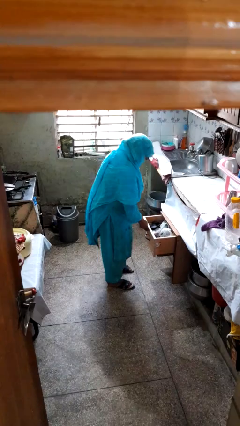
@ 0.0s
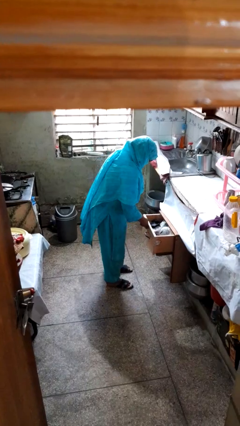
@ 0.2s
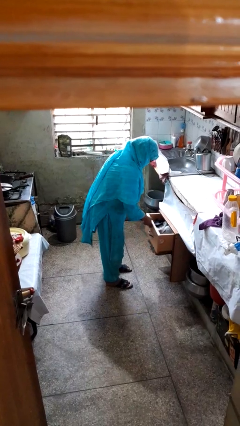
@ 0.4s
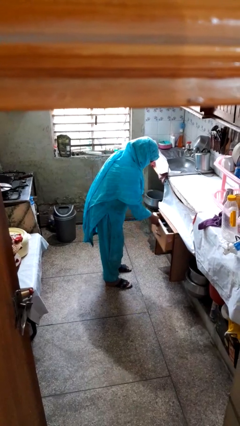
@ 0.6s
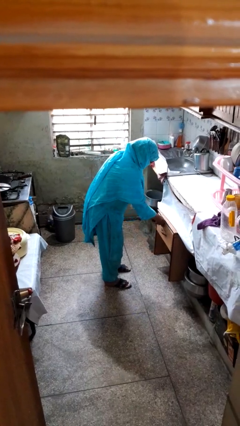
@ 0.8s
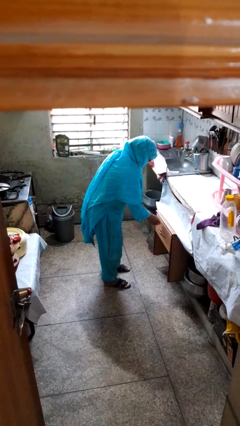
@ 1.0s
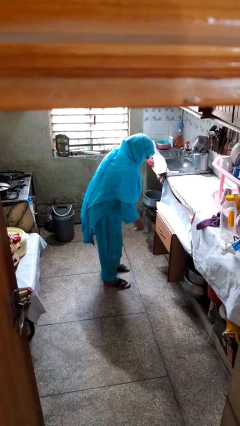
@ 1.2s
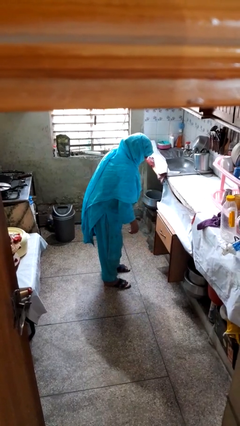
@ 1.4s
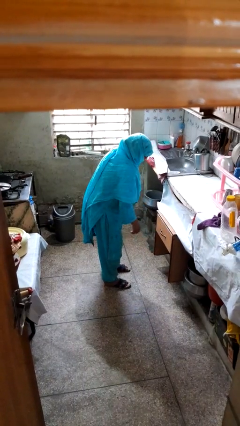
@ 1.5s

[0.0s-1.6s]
person closes kitchen drawer

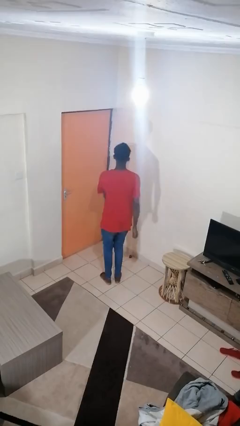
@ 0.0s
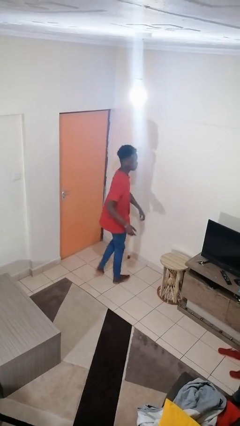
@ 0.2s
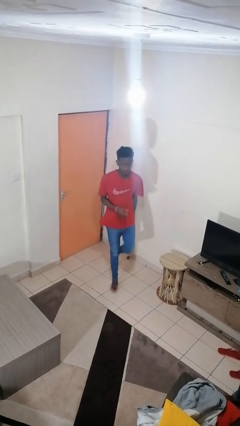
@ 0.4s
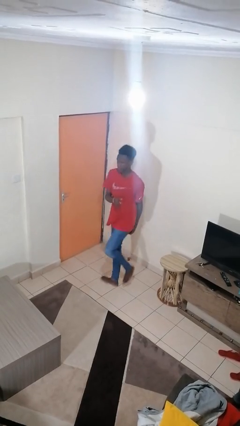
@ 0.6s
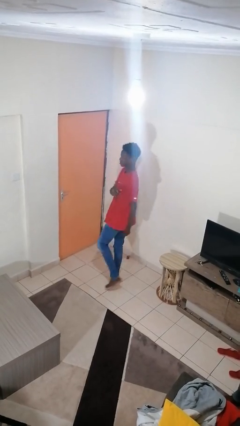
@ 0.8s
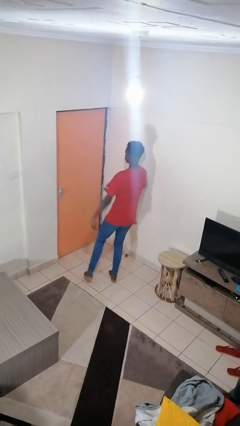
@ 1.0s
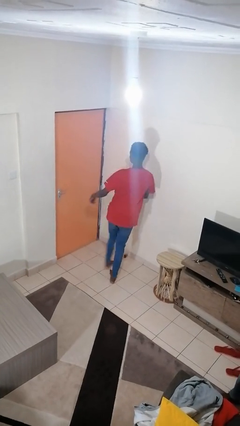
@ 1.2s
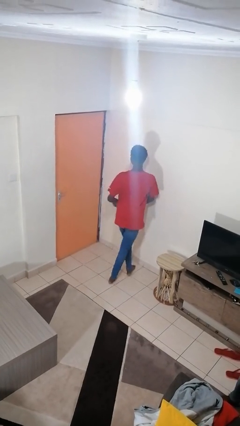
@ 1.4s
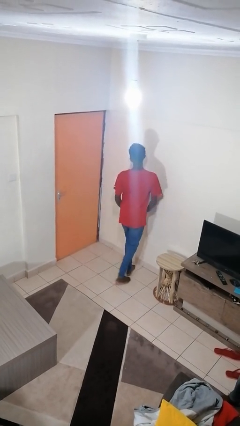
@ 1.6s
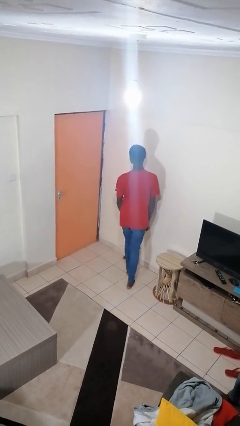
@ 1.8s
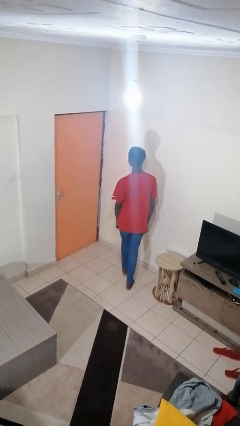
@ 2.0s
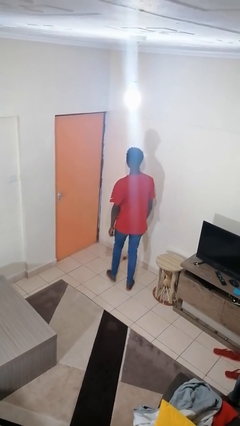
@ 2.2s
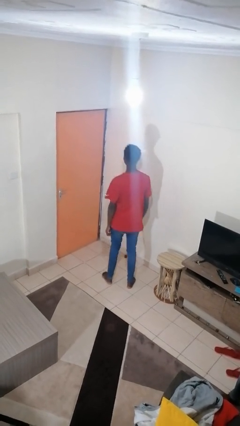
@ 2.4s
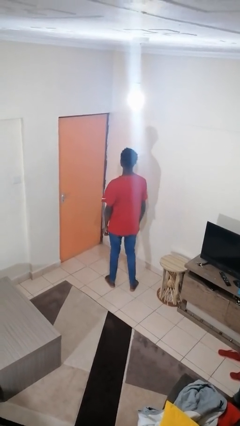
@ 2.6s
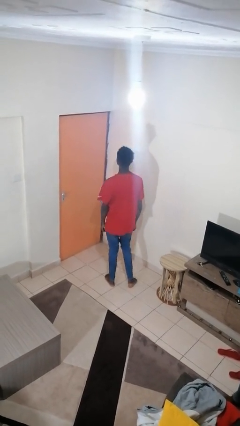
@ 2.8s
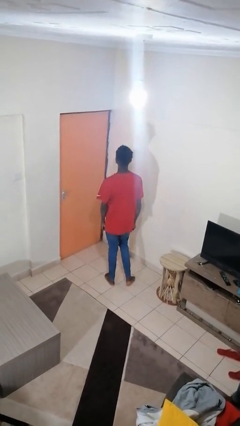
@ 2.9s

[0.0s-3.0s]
person twirls

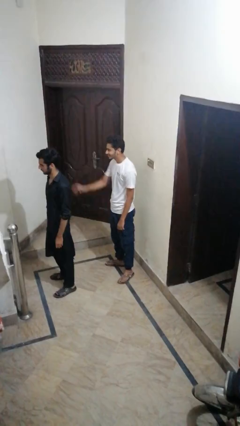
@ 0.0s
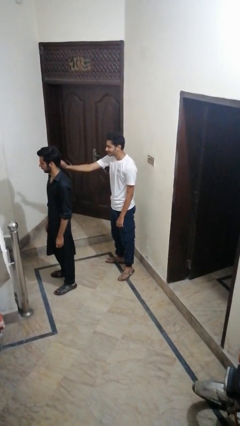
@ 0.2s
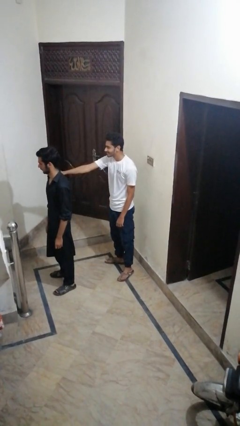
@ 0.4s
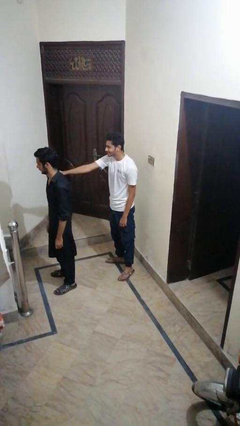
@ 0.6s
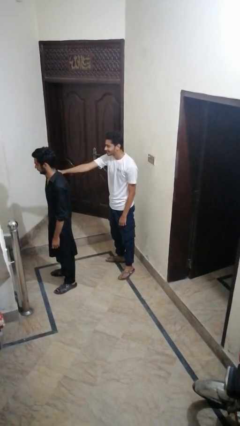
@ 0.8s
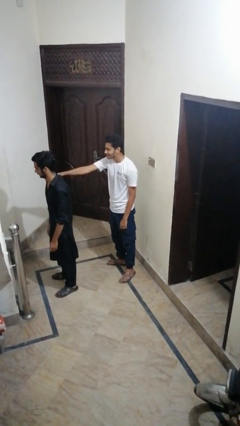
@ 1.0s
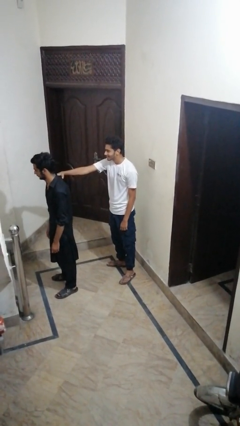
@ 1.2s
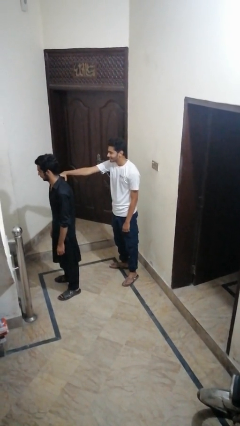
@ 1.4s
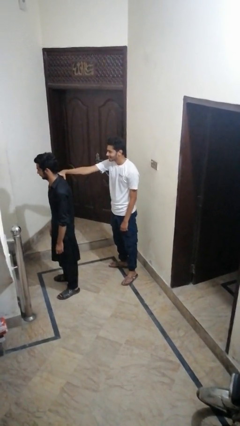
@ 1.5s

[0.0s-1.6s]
person grabs person by shoulder

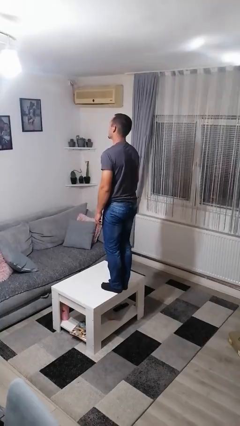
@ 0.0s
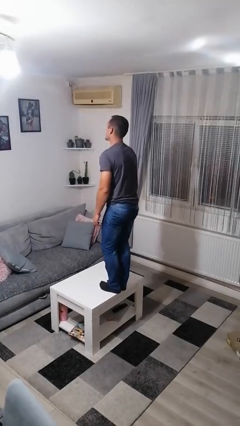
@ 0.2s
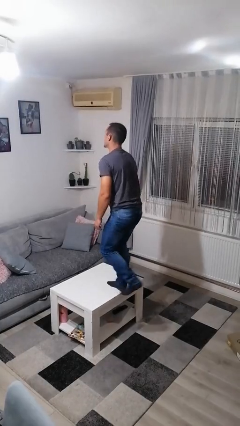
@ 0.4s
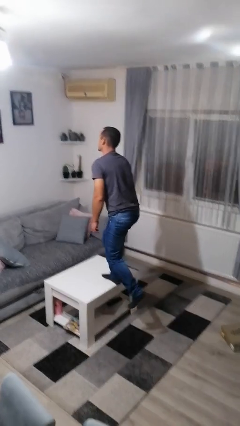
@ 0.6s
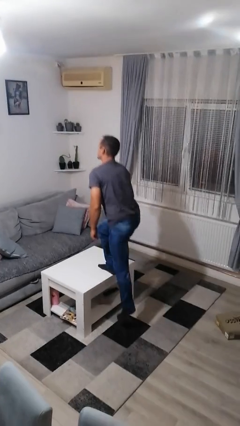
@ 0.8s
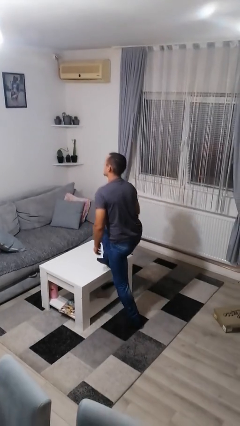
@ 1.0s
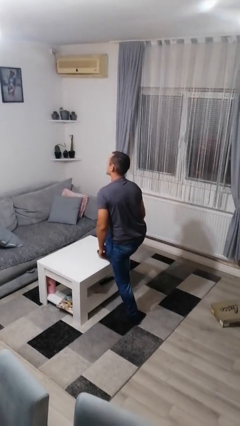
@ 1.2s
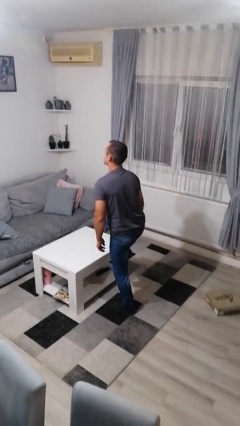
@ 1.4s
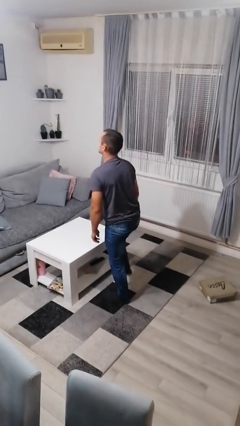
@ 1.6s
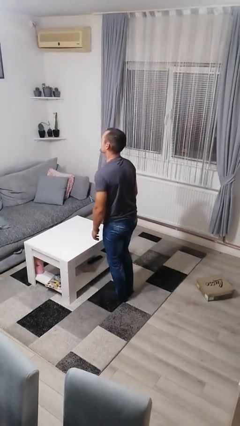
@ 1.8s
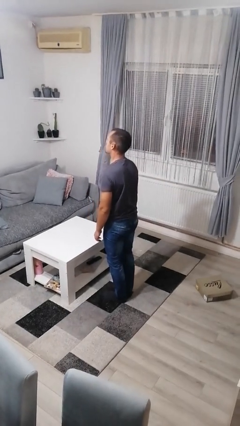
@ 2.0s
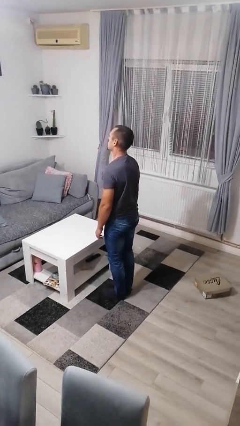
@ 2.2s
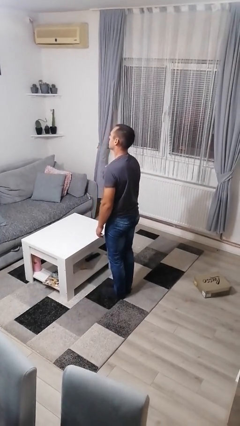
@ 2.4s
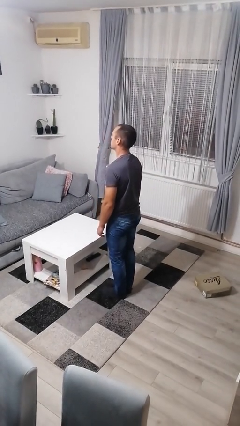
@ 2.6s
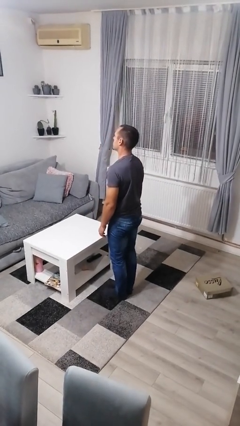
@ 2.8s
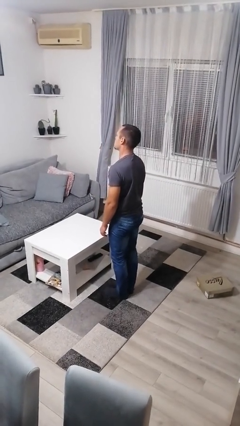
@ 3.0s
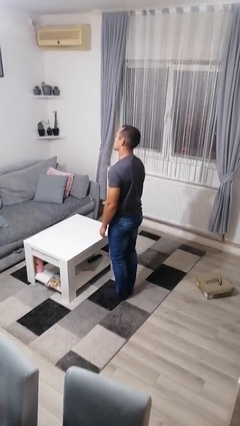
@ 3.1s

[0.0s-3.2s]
person climbs off table

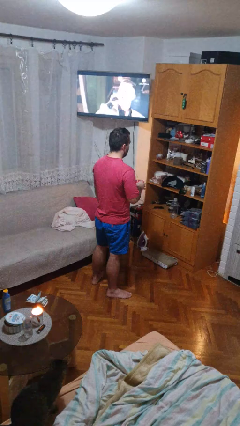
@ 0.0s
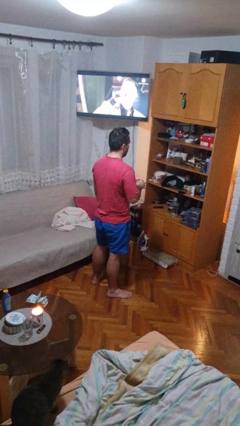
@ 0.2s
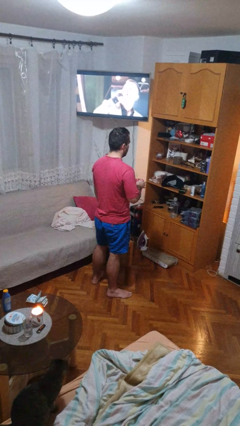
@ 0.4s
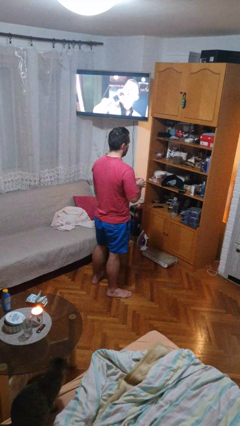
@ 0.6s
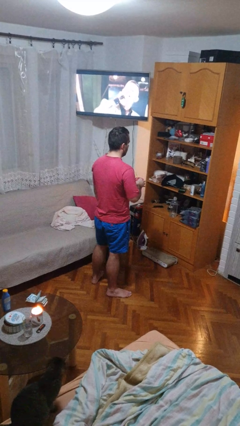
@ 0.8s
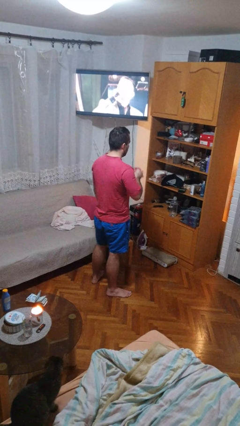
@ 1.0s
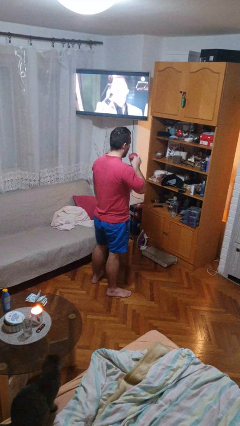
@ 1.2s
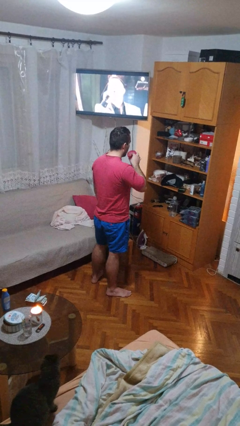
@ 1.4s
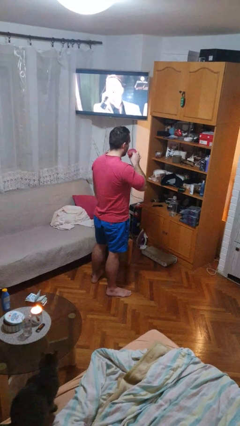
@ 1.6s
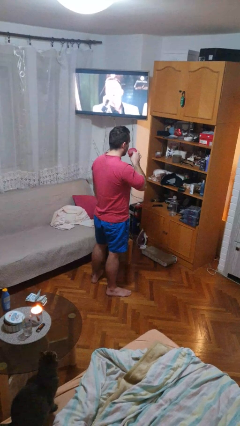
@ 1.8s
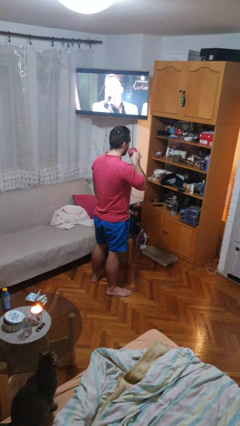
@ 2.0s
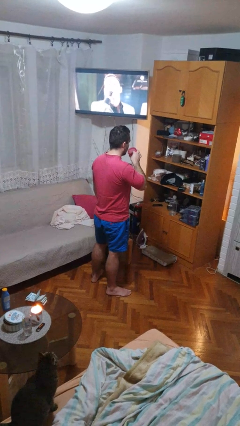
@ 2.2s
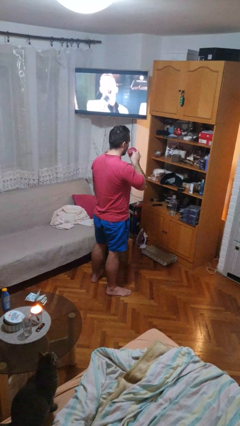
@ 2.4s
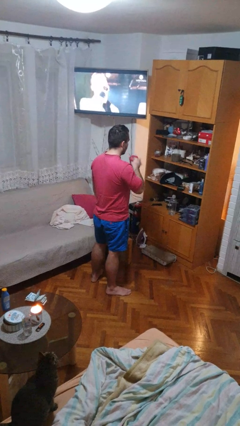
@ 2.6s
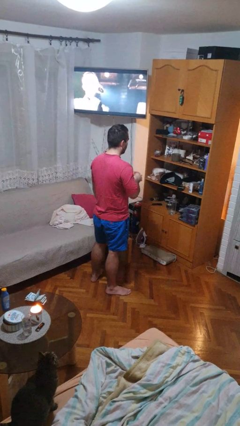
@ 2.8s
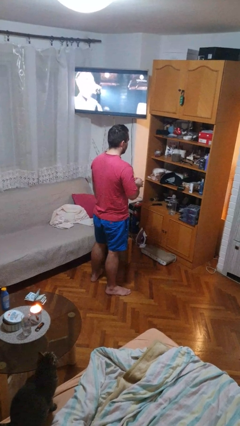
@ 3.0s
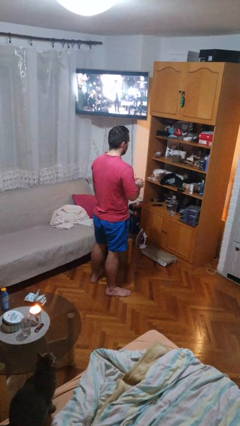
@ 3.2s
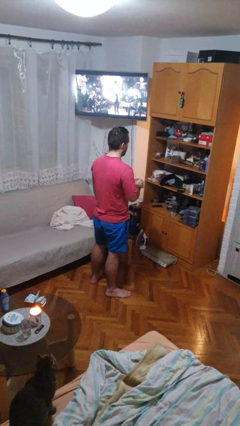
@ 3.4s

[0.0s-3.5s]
person drinks from straw

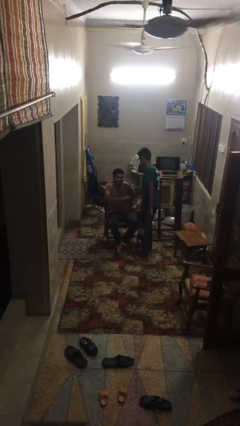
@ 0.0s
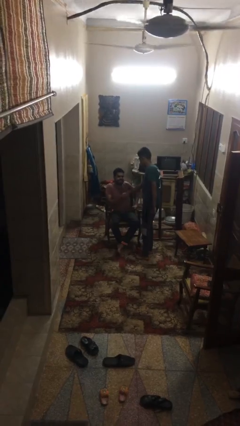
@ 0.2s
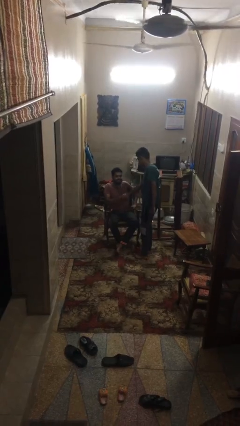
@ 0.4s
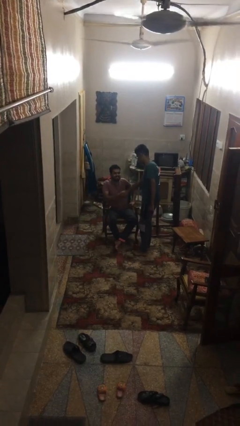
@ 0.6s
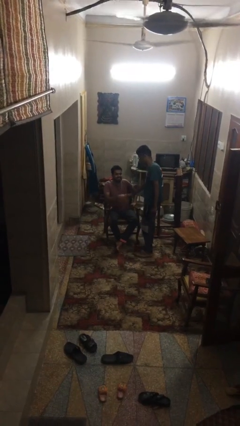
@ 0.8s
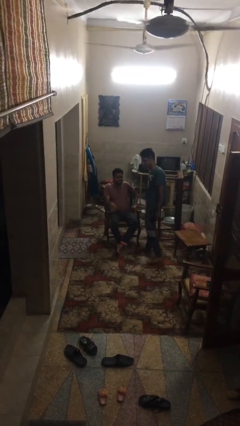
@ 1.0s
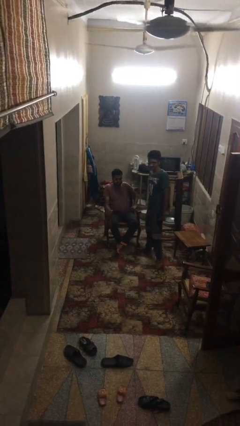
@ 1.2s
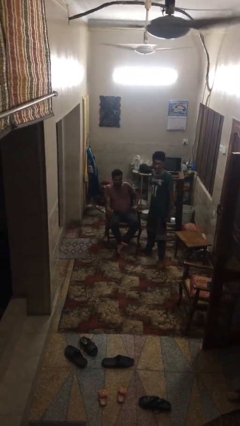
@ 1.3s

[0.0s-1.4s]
person shakes hand

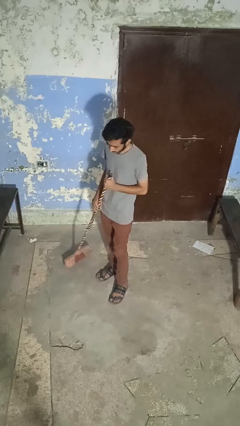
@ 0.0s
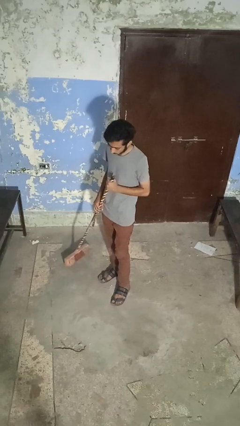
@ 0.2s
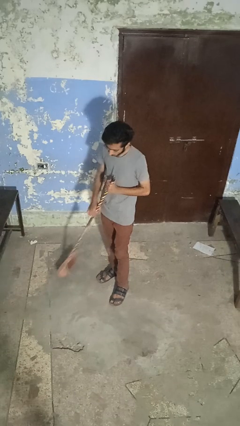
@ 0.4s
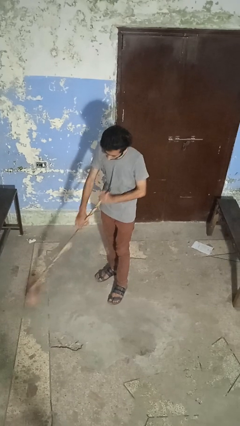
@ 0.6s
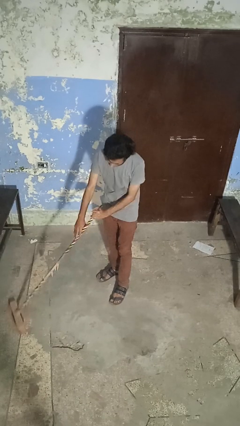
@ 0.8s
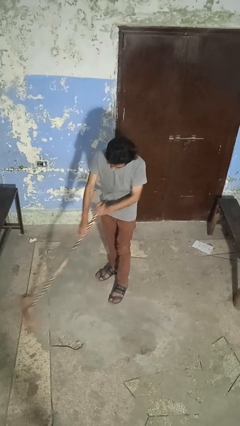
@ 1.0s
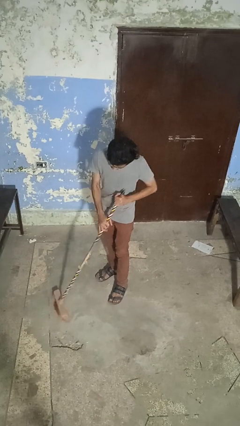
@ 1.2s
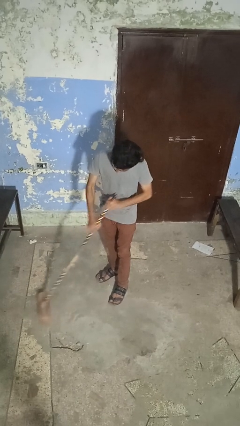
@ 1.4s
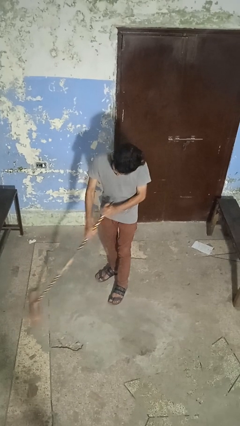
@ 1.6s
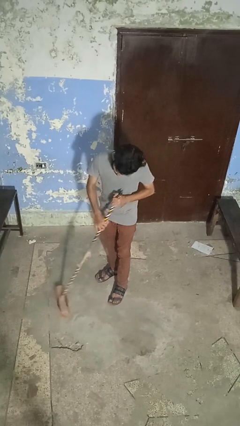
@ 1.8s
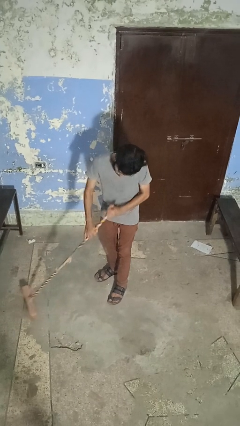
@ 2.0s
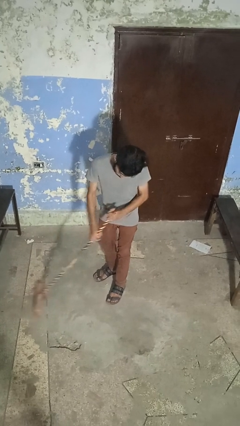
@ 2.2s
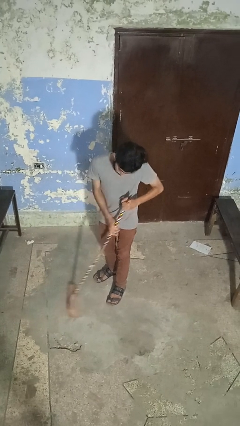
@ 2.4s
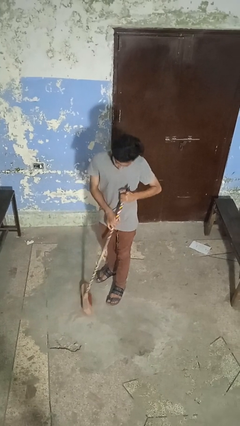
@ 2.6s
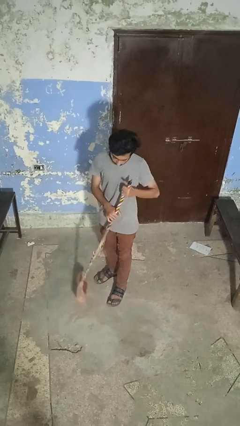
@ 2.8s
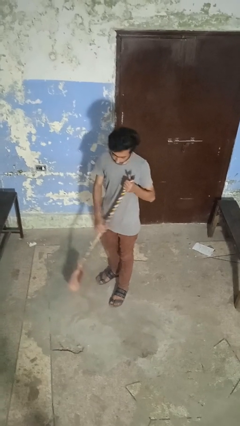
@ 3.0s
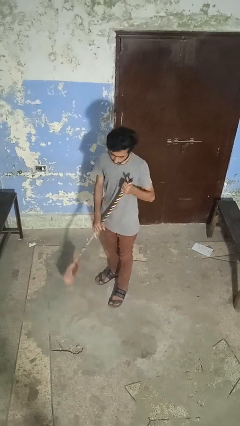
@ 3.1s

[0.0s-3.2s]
person sweeps floor
